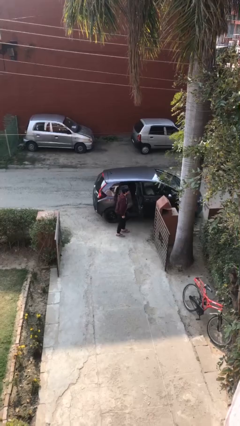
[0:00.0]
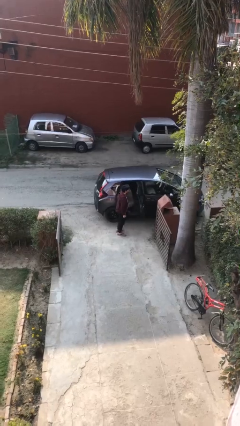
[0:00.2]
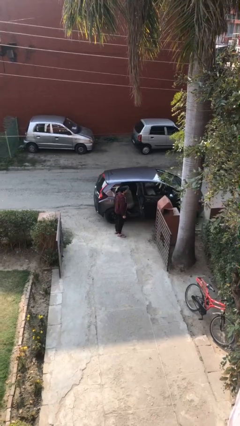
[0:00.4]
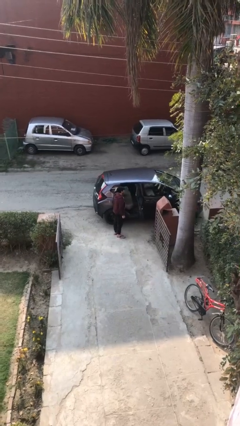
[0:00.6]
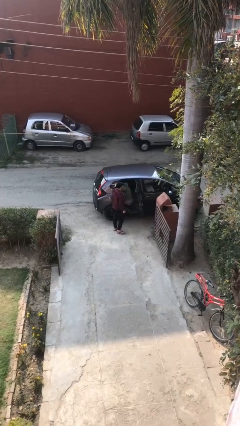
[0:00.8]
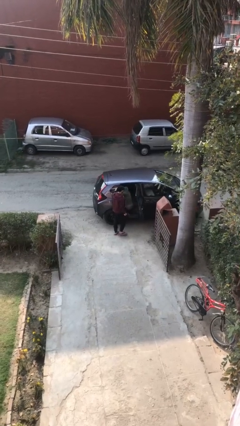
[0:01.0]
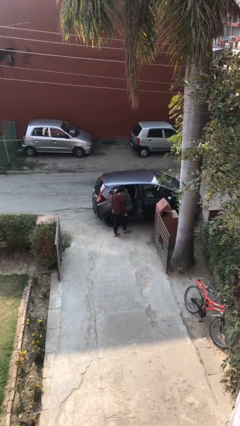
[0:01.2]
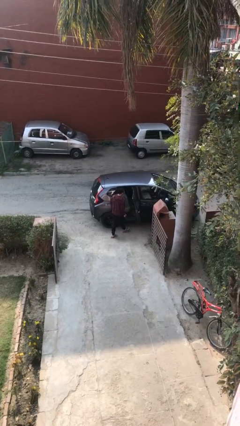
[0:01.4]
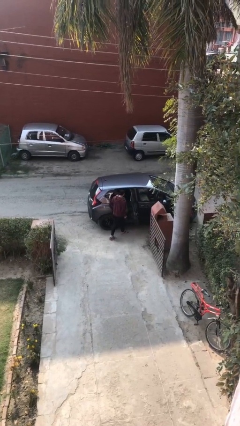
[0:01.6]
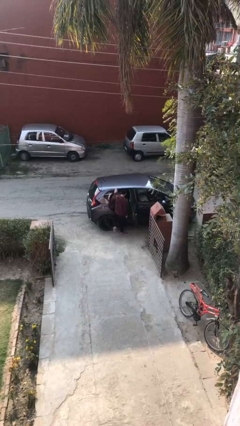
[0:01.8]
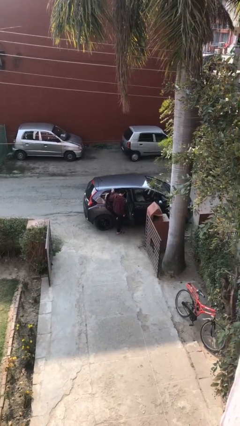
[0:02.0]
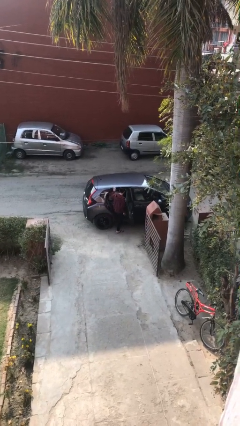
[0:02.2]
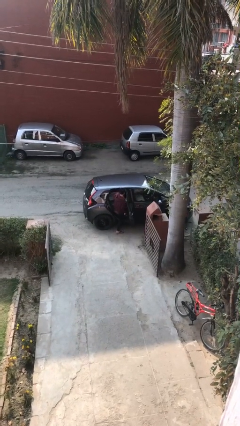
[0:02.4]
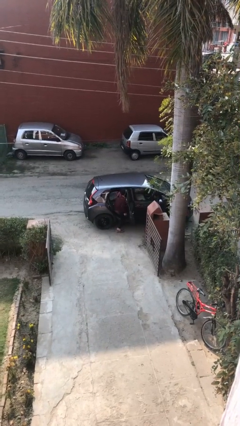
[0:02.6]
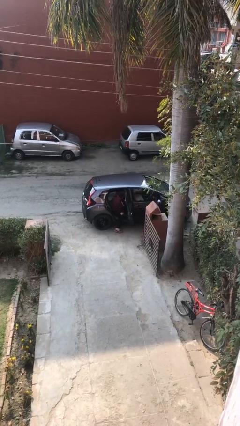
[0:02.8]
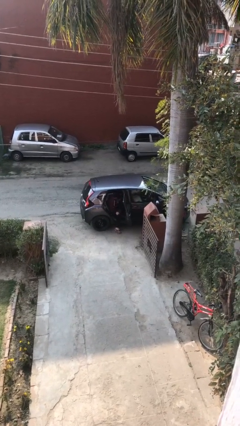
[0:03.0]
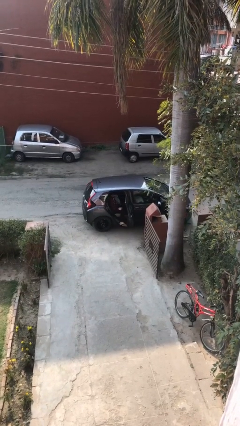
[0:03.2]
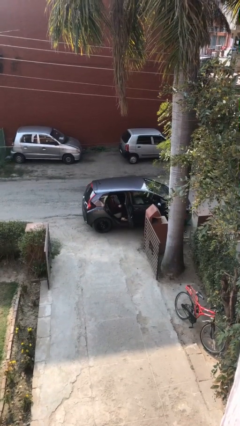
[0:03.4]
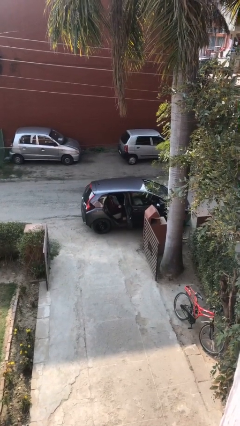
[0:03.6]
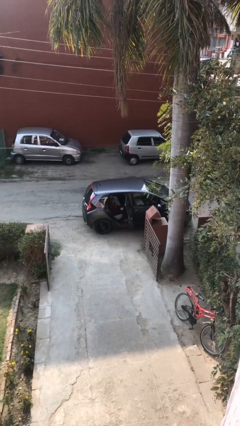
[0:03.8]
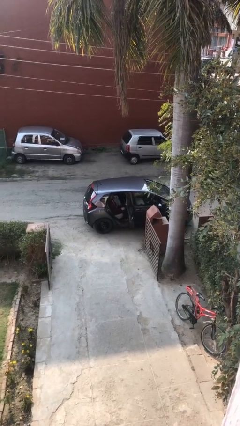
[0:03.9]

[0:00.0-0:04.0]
person enters car

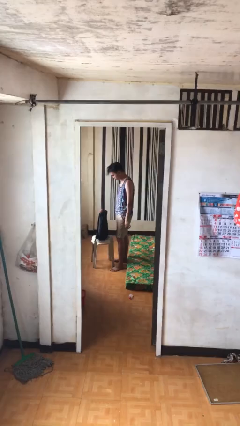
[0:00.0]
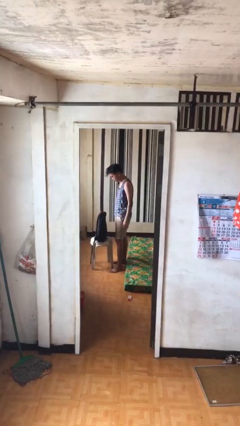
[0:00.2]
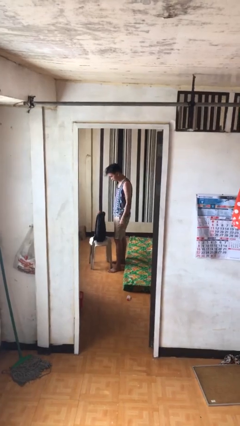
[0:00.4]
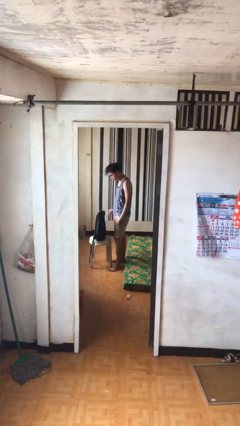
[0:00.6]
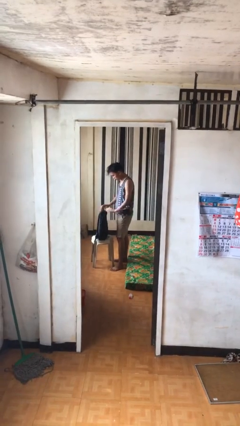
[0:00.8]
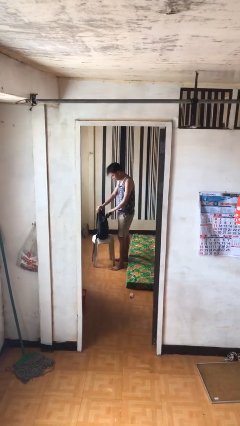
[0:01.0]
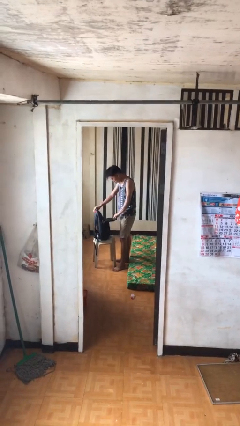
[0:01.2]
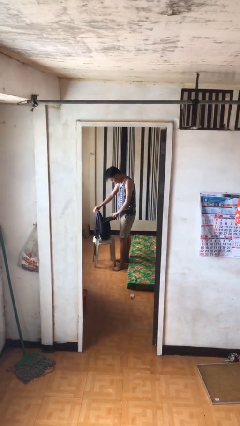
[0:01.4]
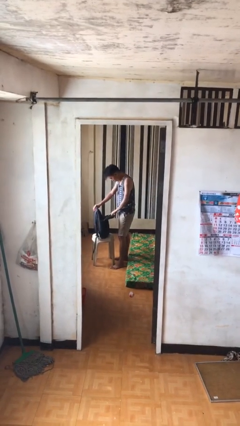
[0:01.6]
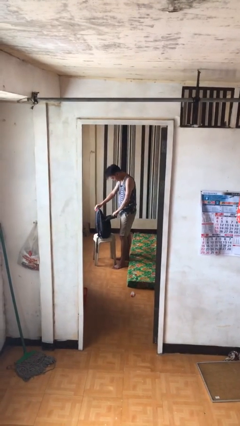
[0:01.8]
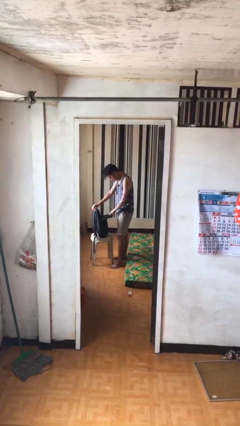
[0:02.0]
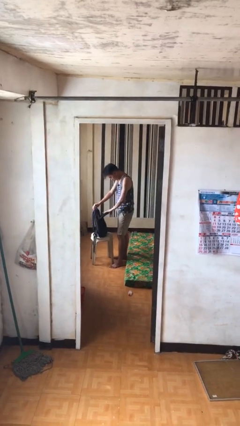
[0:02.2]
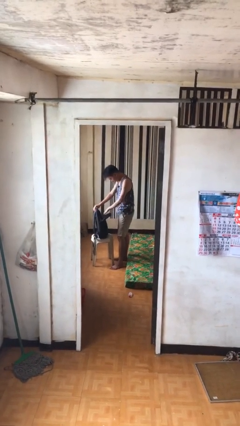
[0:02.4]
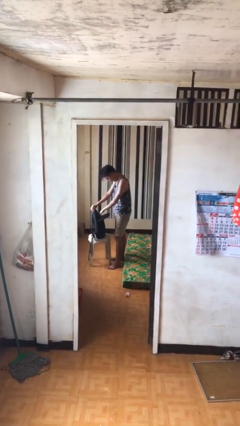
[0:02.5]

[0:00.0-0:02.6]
person searches in backpack

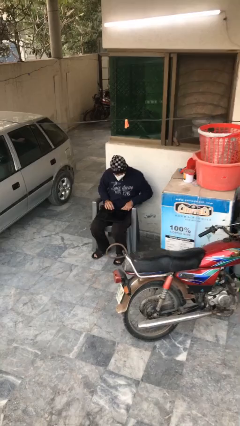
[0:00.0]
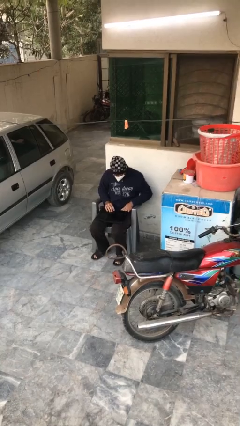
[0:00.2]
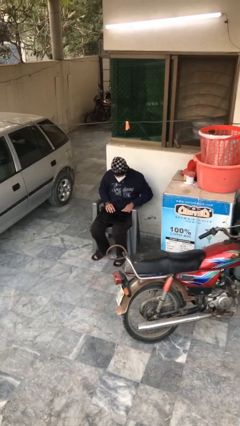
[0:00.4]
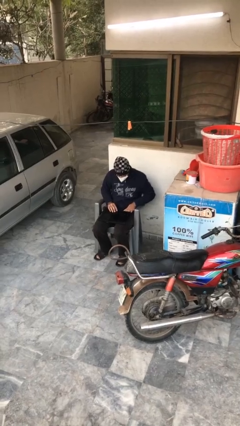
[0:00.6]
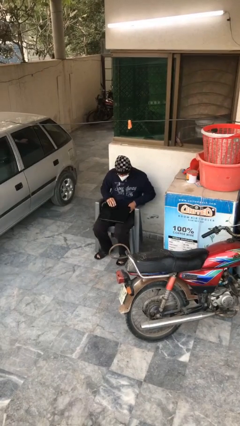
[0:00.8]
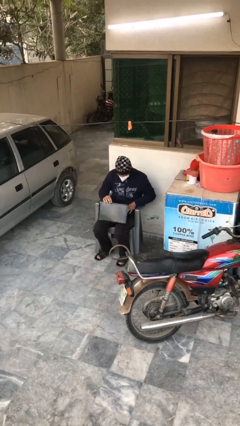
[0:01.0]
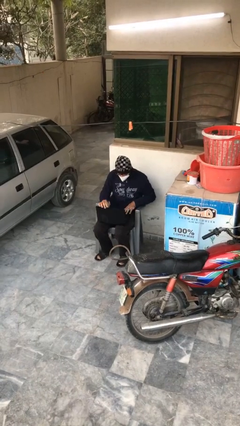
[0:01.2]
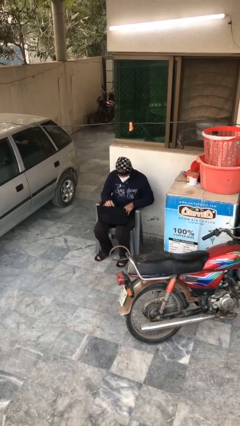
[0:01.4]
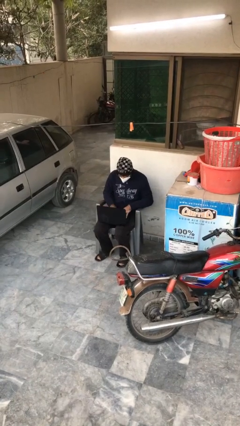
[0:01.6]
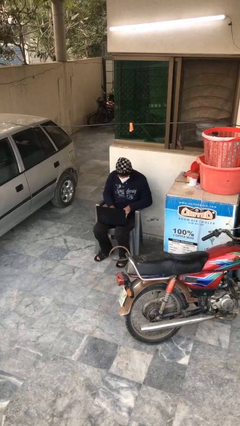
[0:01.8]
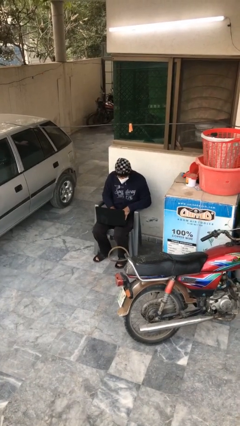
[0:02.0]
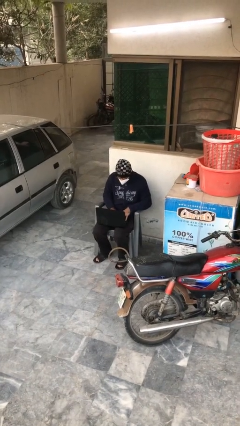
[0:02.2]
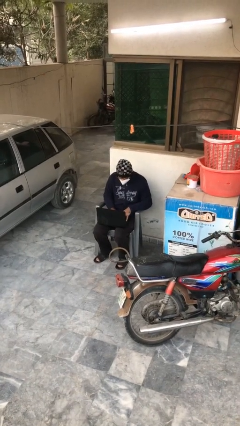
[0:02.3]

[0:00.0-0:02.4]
person interacts with laptop

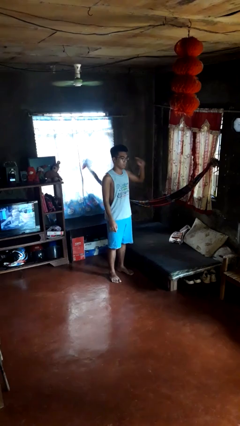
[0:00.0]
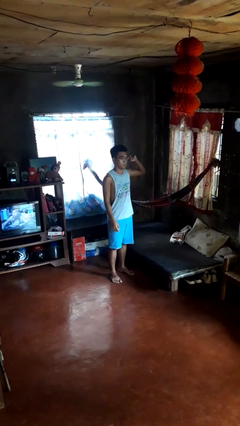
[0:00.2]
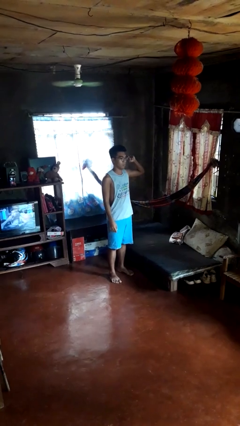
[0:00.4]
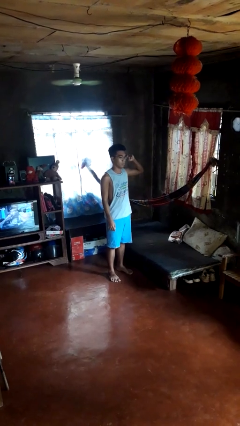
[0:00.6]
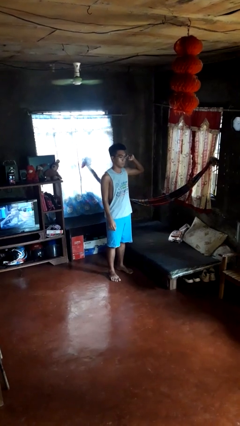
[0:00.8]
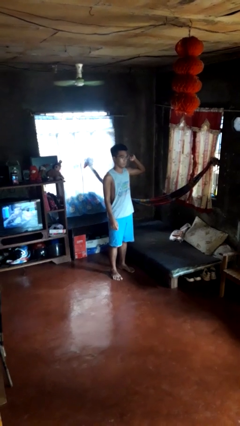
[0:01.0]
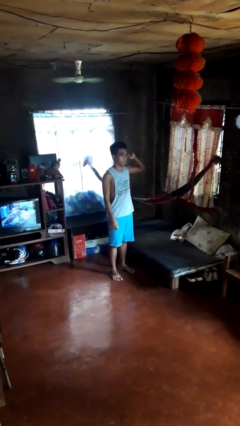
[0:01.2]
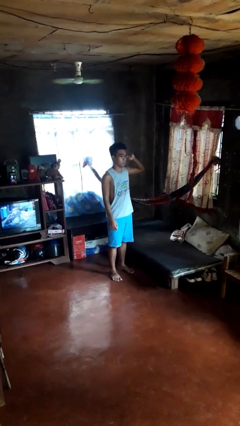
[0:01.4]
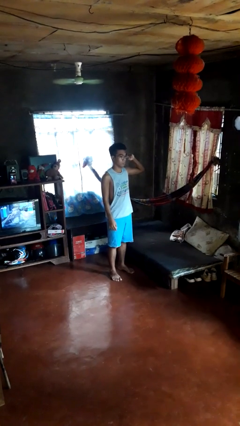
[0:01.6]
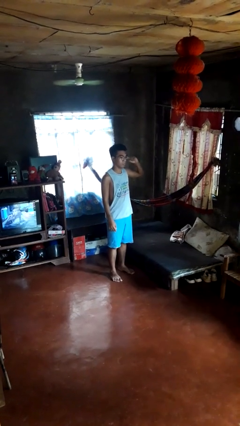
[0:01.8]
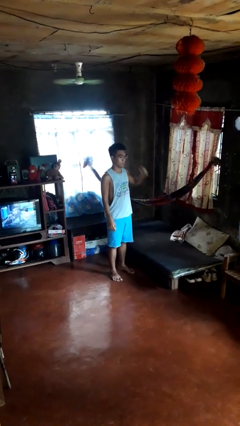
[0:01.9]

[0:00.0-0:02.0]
person gestures listen closely

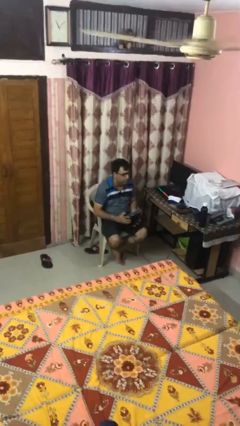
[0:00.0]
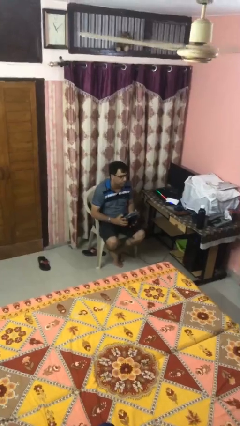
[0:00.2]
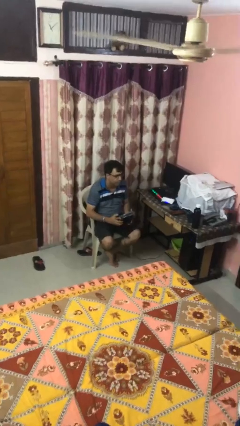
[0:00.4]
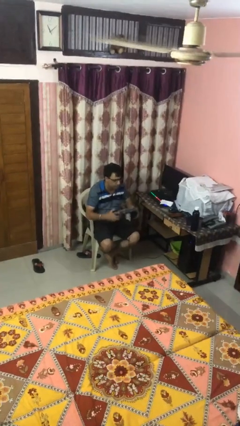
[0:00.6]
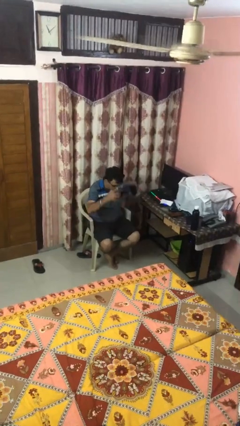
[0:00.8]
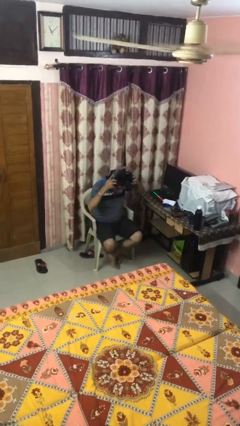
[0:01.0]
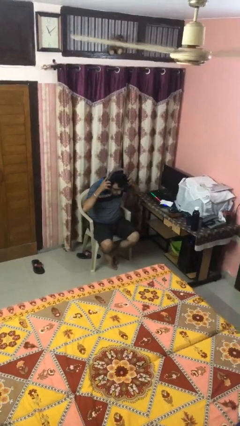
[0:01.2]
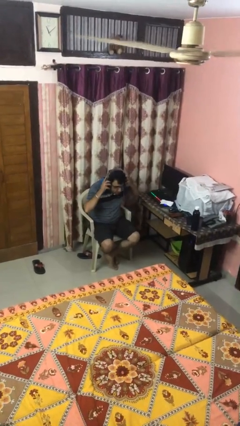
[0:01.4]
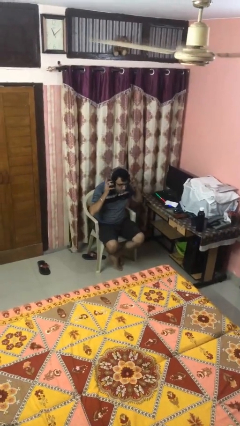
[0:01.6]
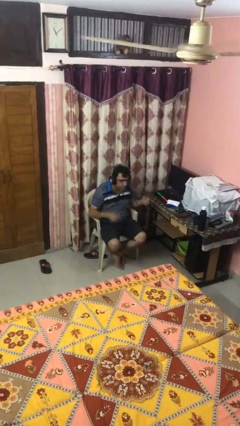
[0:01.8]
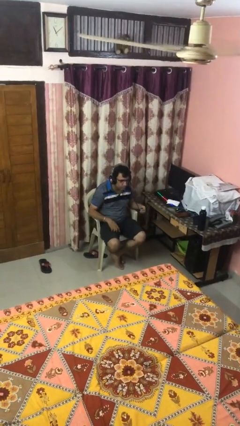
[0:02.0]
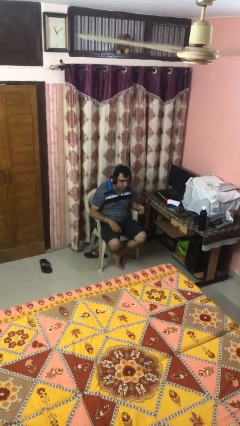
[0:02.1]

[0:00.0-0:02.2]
person puts on headphones

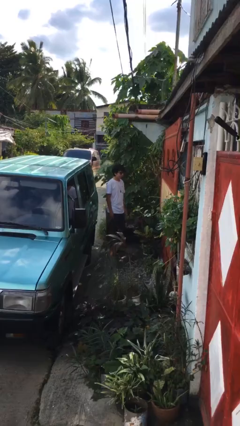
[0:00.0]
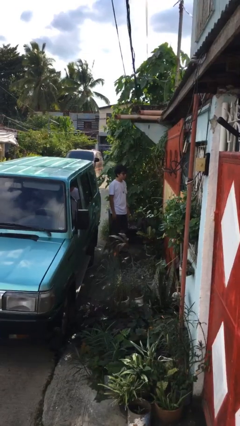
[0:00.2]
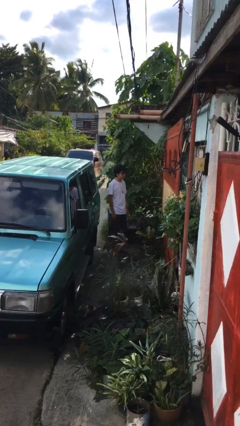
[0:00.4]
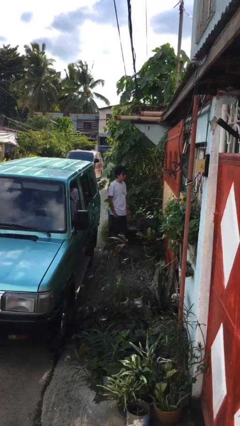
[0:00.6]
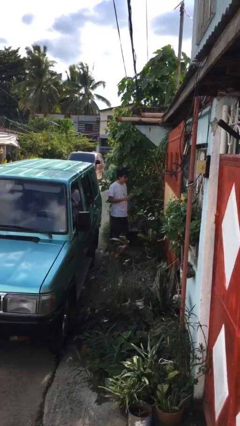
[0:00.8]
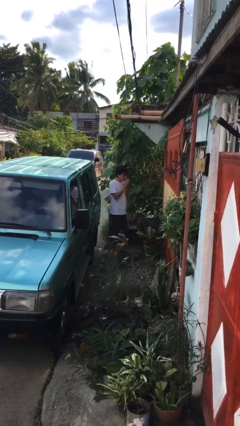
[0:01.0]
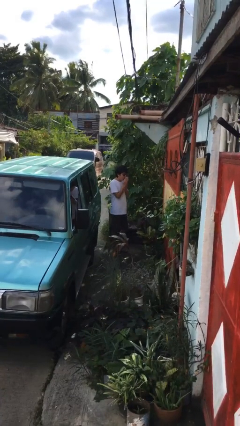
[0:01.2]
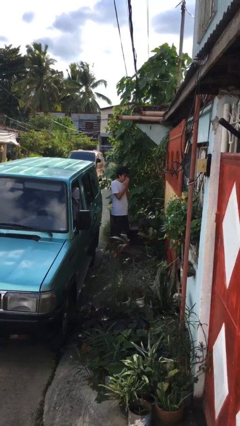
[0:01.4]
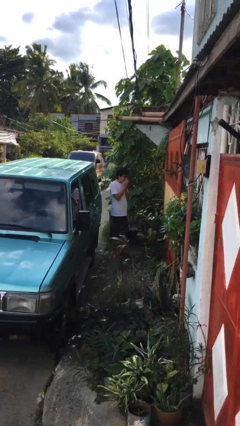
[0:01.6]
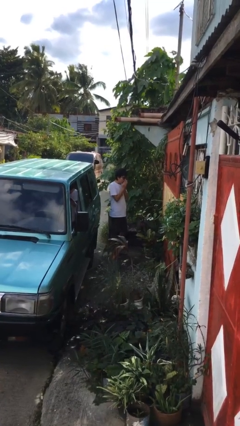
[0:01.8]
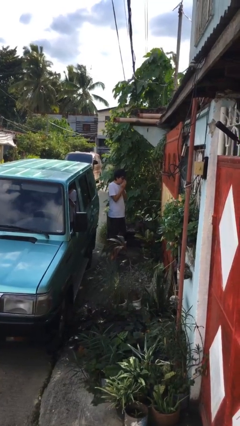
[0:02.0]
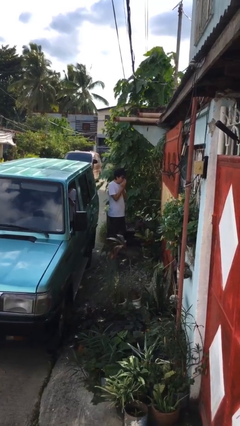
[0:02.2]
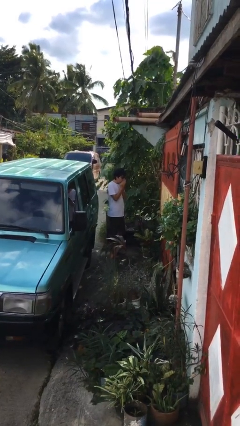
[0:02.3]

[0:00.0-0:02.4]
person blows into hands

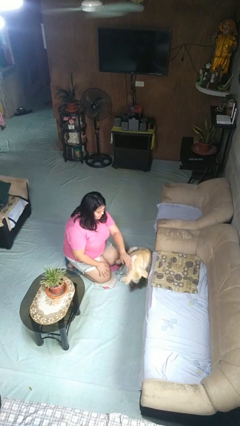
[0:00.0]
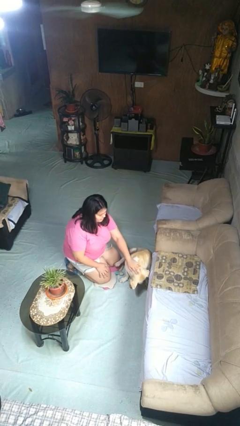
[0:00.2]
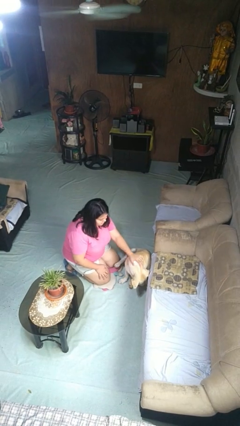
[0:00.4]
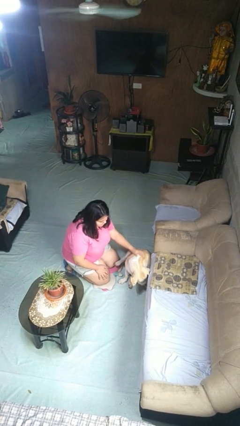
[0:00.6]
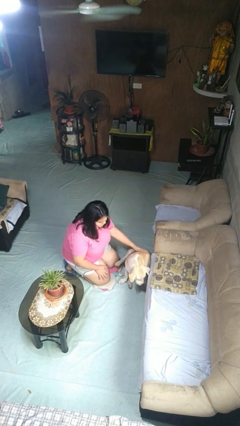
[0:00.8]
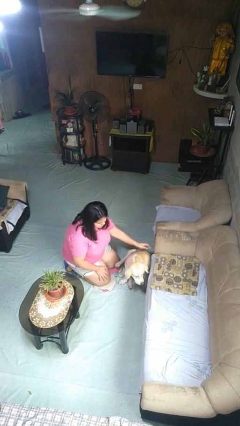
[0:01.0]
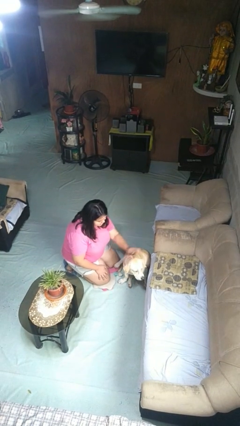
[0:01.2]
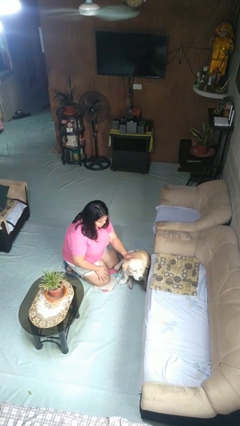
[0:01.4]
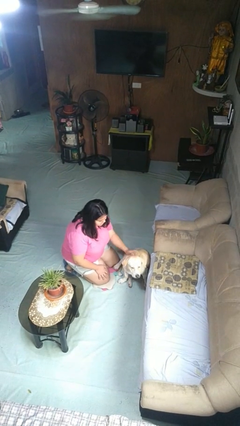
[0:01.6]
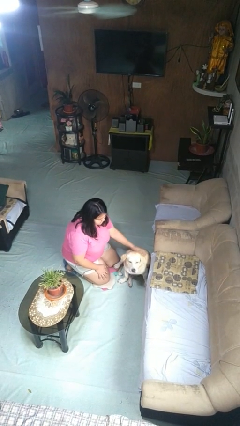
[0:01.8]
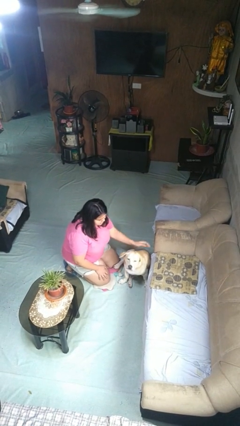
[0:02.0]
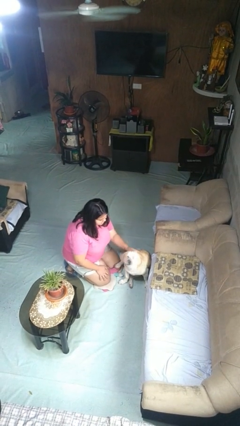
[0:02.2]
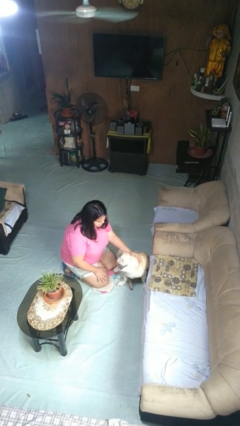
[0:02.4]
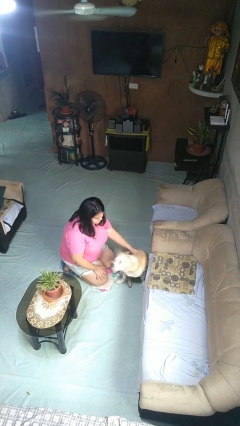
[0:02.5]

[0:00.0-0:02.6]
person pets dog
